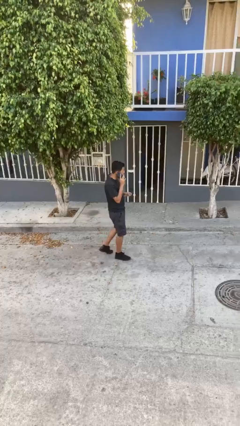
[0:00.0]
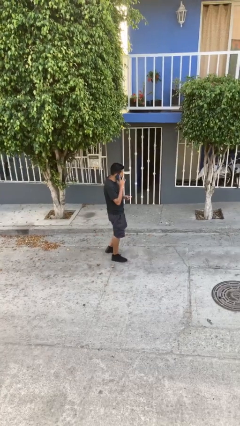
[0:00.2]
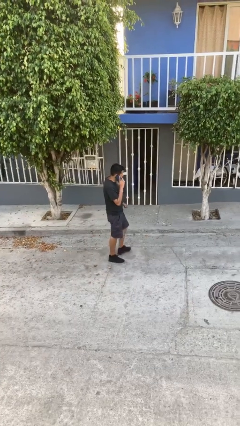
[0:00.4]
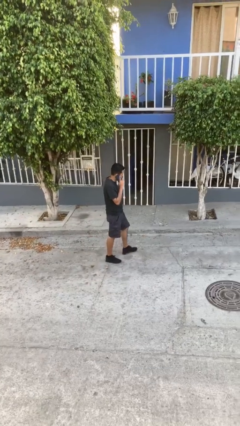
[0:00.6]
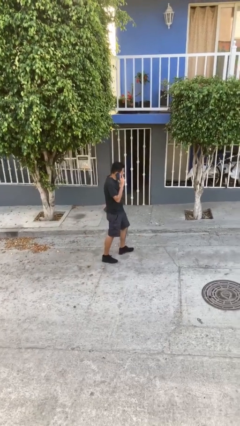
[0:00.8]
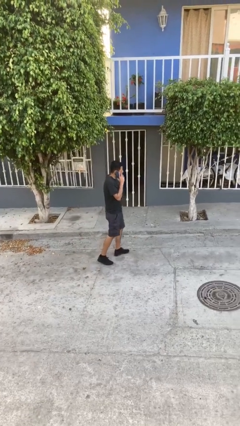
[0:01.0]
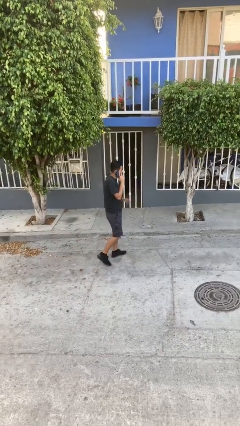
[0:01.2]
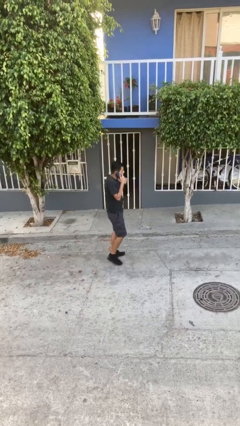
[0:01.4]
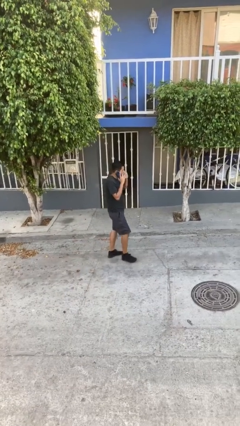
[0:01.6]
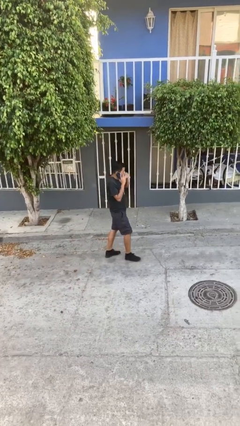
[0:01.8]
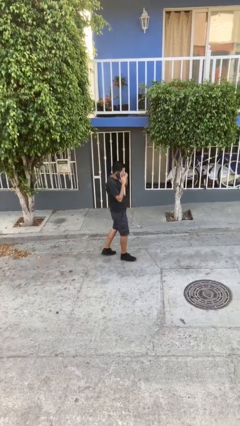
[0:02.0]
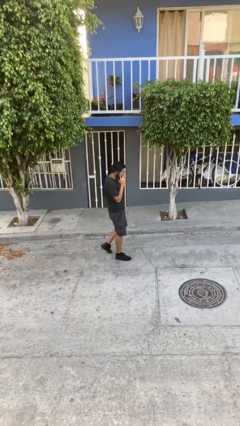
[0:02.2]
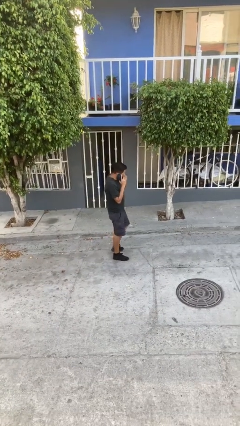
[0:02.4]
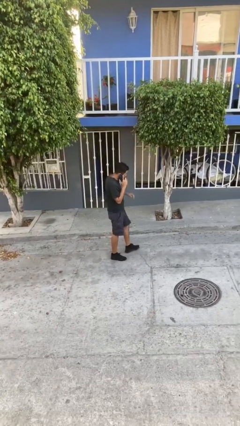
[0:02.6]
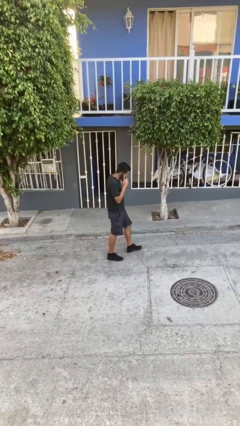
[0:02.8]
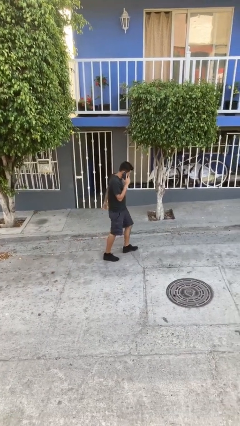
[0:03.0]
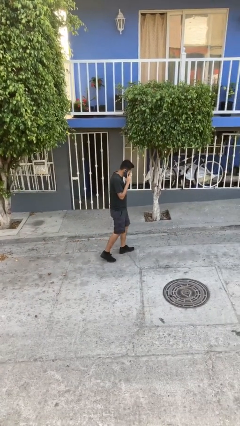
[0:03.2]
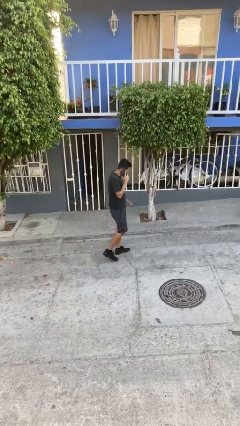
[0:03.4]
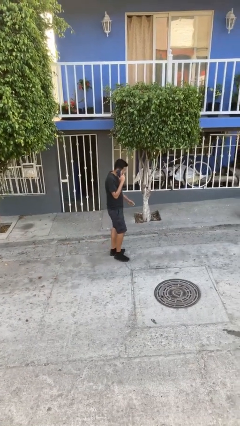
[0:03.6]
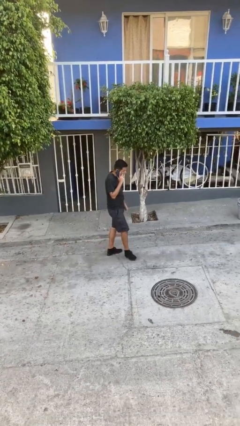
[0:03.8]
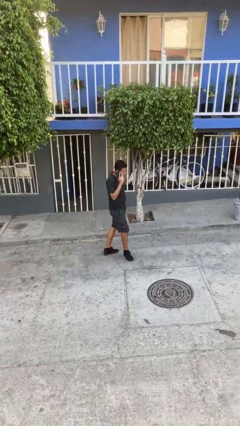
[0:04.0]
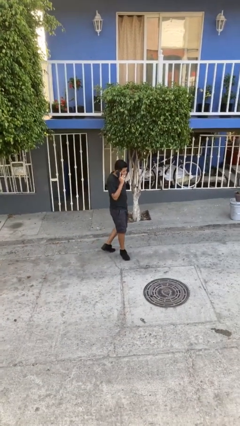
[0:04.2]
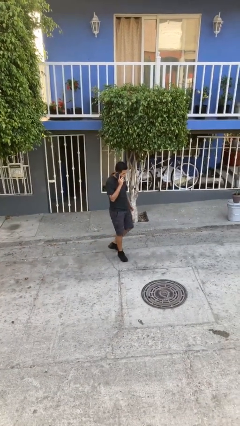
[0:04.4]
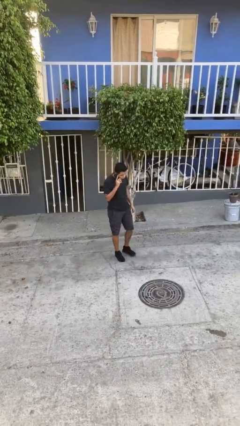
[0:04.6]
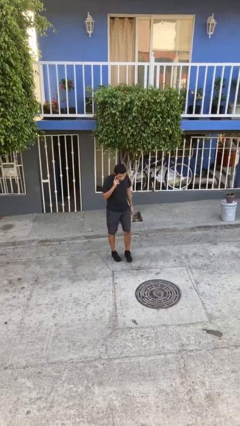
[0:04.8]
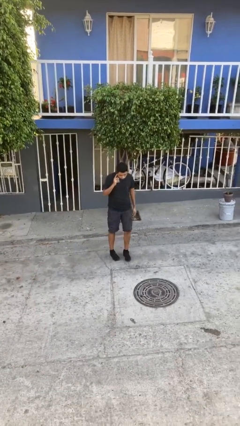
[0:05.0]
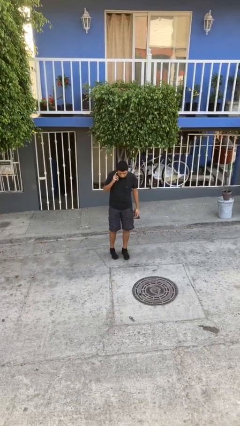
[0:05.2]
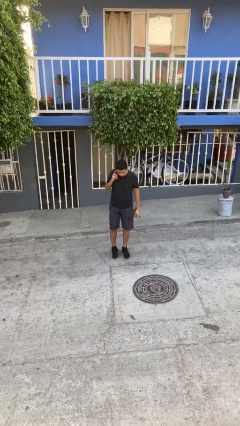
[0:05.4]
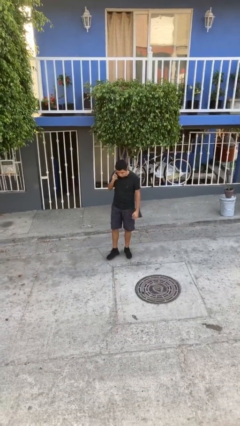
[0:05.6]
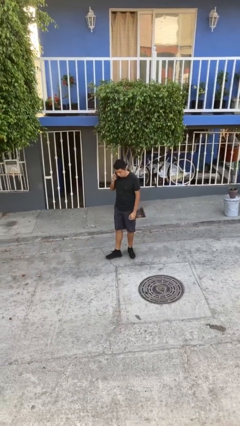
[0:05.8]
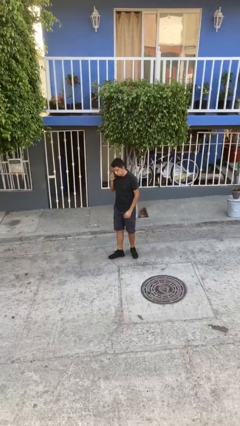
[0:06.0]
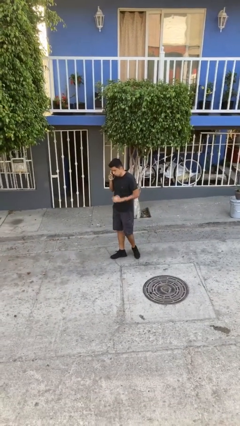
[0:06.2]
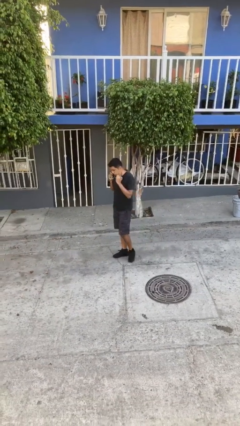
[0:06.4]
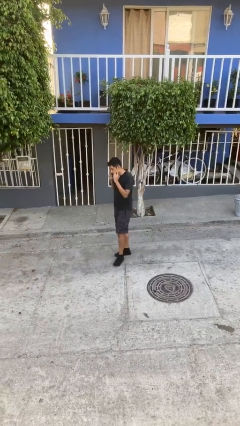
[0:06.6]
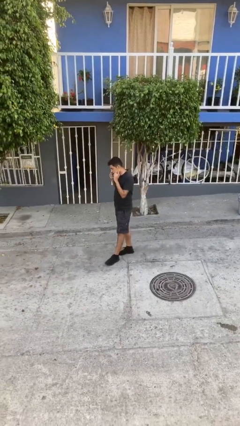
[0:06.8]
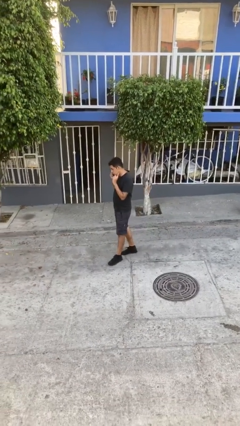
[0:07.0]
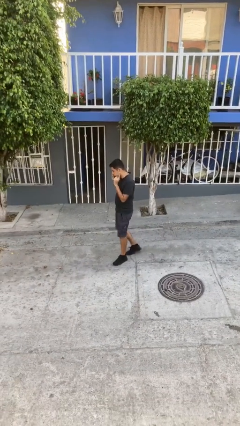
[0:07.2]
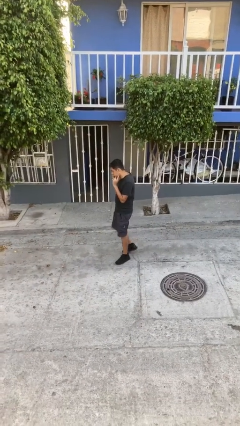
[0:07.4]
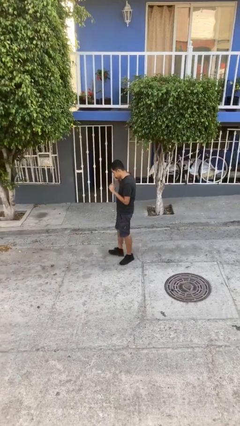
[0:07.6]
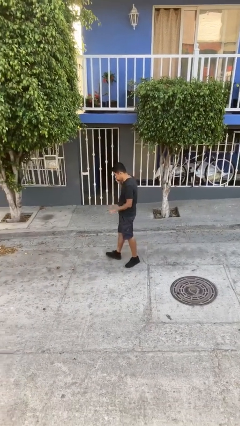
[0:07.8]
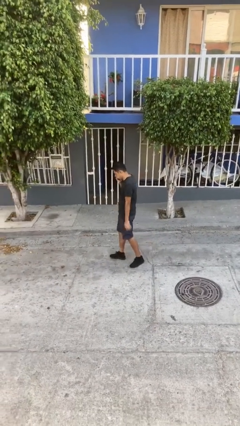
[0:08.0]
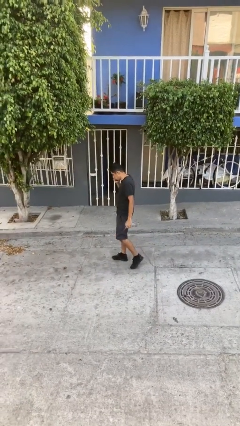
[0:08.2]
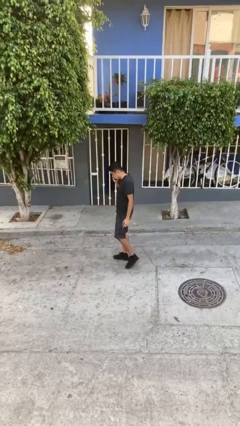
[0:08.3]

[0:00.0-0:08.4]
person talks on phone

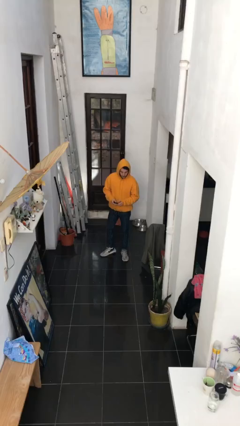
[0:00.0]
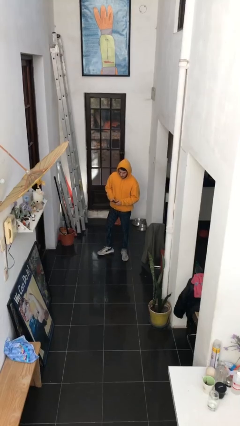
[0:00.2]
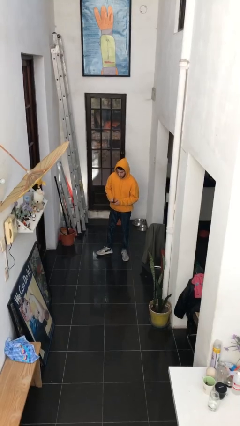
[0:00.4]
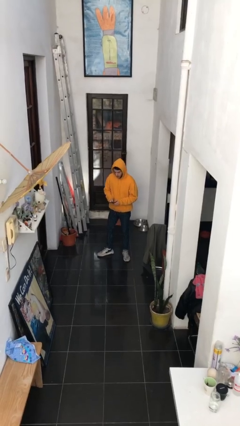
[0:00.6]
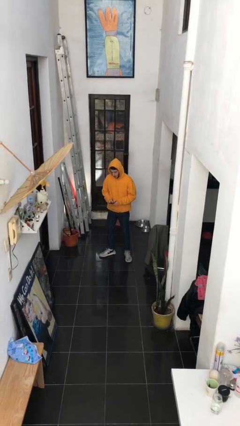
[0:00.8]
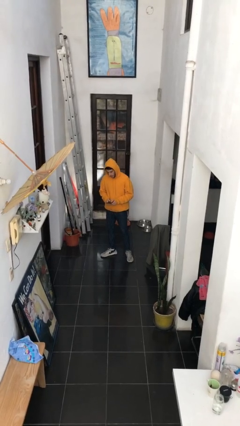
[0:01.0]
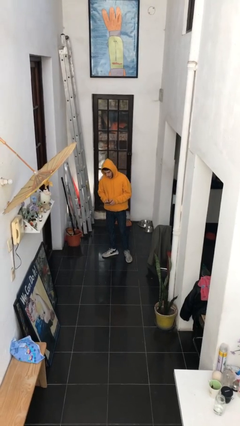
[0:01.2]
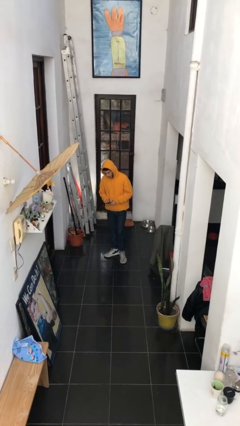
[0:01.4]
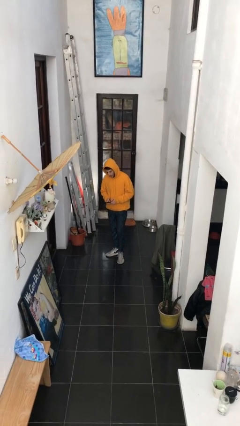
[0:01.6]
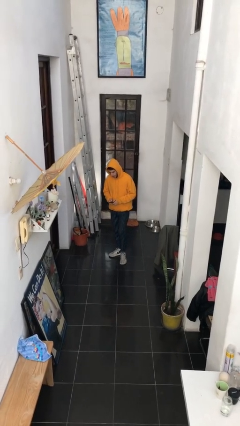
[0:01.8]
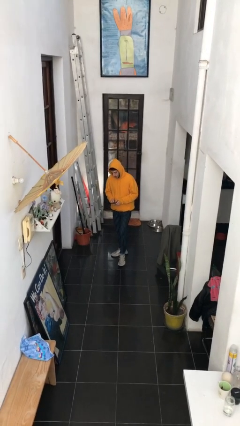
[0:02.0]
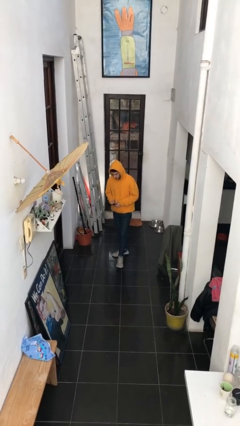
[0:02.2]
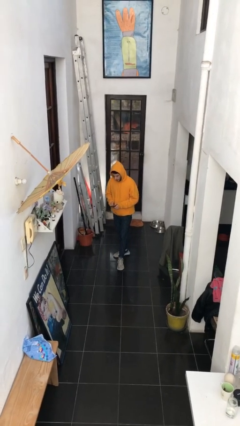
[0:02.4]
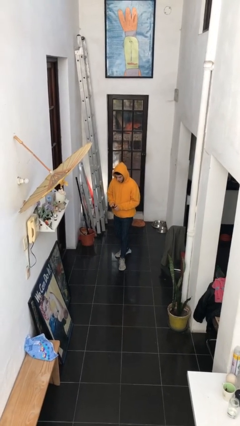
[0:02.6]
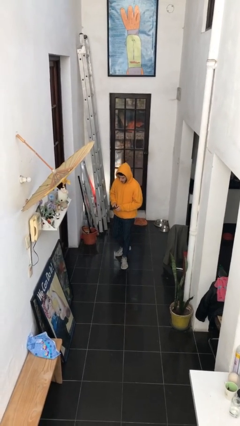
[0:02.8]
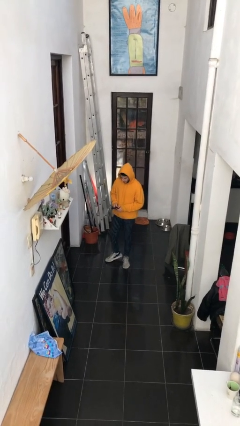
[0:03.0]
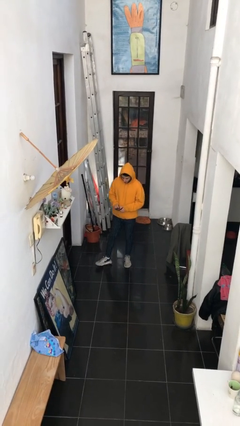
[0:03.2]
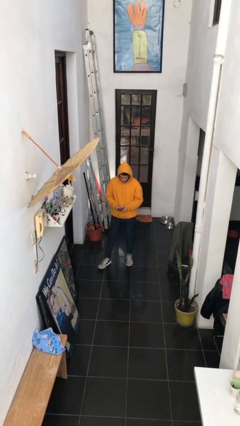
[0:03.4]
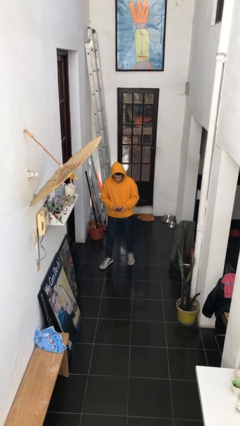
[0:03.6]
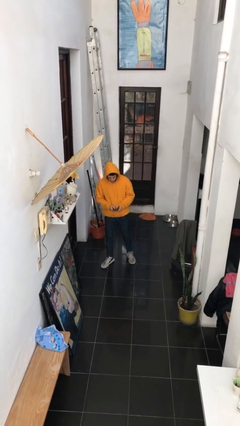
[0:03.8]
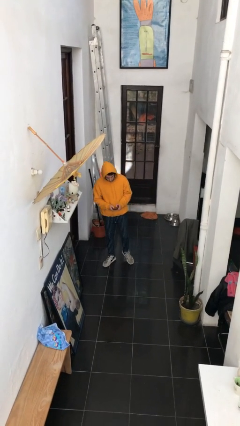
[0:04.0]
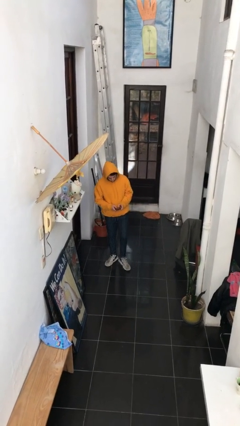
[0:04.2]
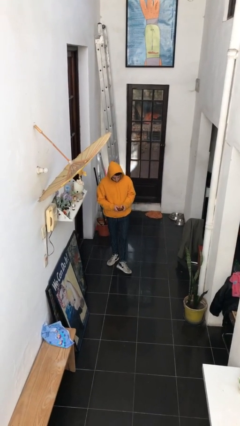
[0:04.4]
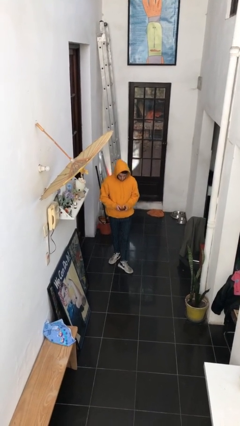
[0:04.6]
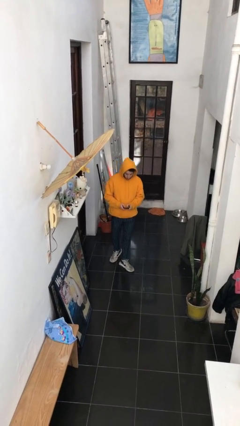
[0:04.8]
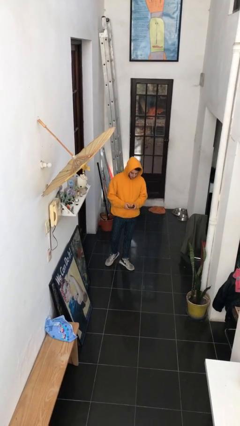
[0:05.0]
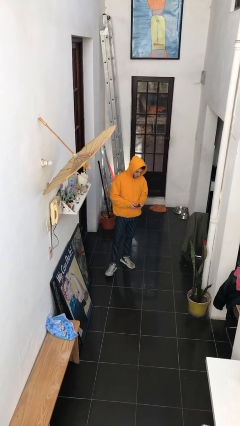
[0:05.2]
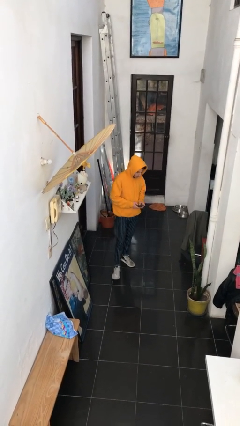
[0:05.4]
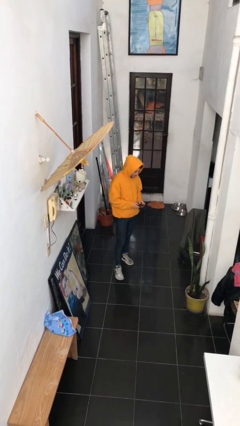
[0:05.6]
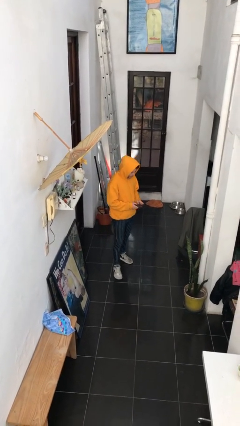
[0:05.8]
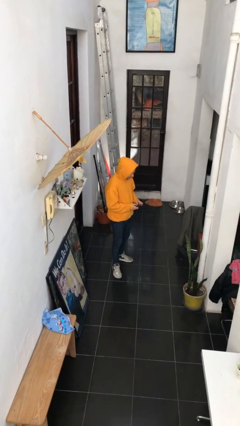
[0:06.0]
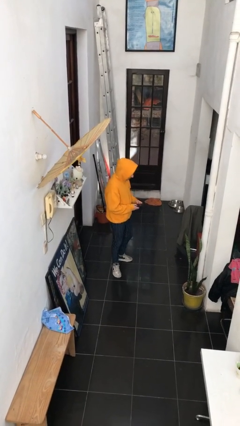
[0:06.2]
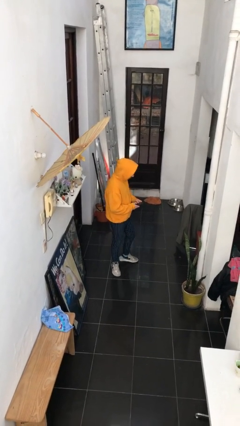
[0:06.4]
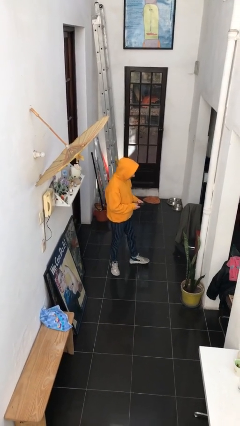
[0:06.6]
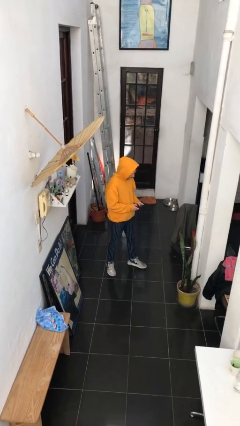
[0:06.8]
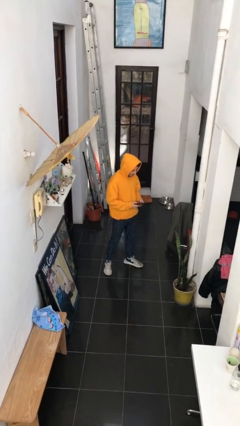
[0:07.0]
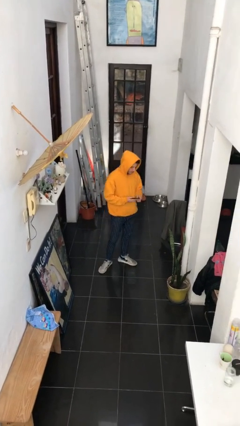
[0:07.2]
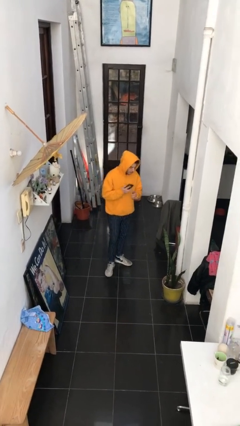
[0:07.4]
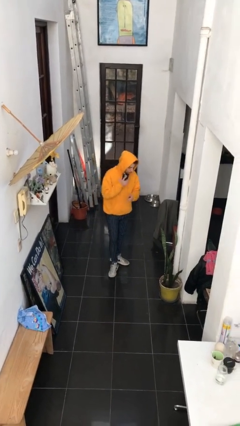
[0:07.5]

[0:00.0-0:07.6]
person texts on phone

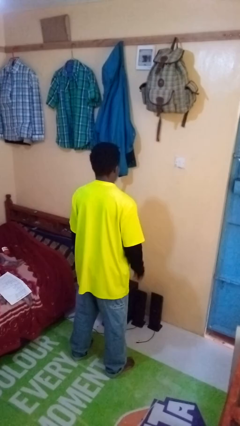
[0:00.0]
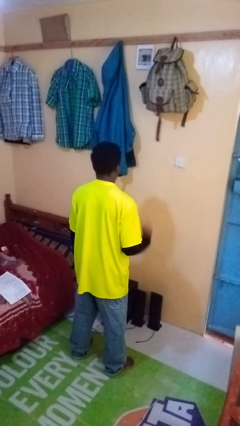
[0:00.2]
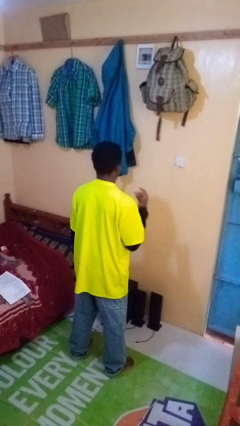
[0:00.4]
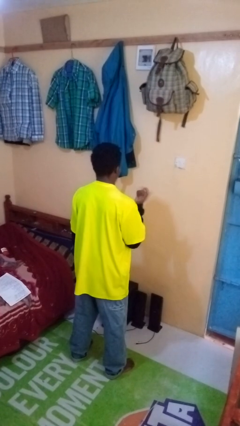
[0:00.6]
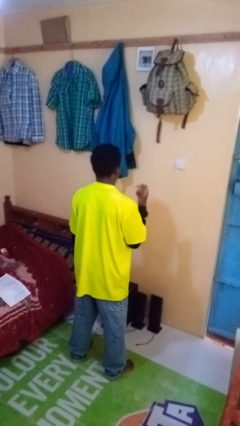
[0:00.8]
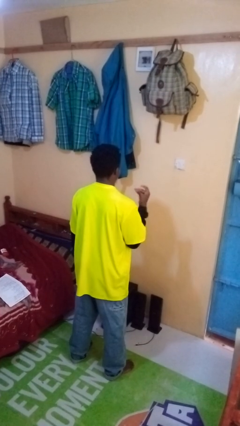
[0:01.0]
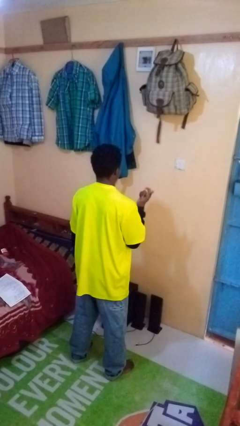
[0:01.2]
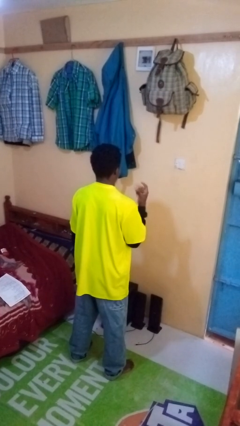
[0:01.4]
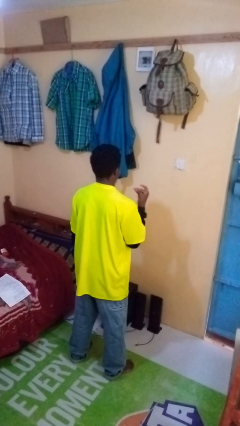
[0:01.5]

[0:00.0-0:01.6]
person snaps fingers

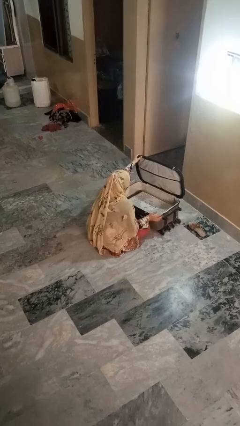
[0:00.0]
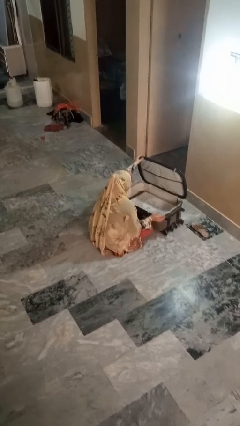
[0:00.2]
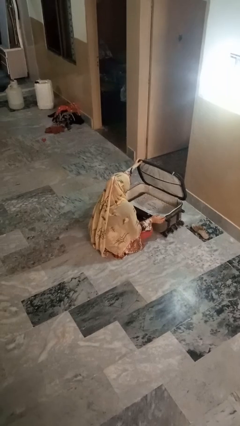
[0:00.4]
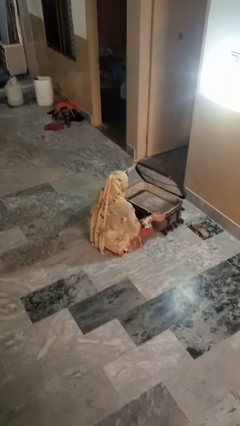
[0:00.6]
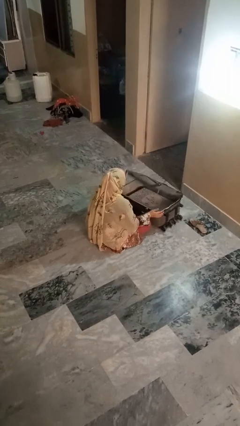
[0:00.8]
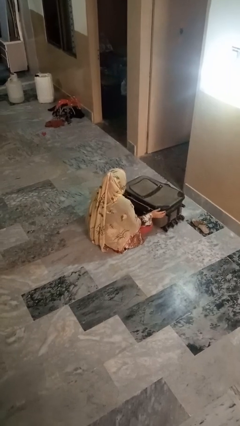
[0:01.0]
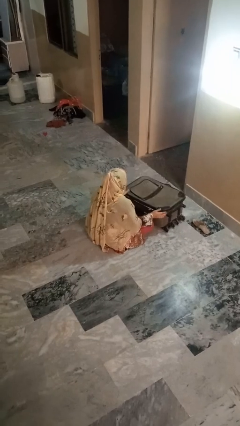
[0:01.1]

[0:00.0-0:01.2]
person closes suitcase
